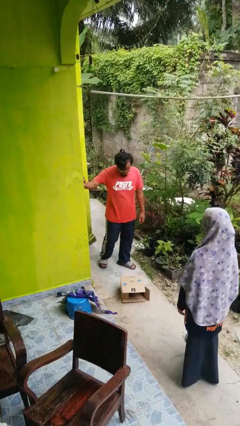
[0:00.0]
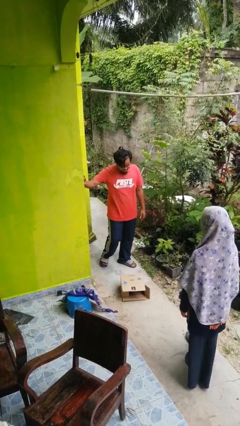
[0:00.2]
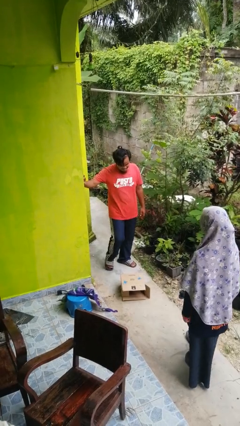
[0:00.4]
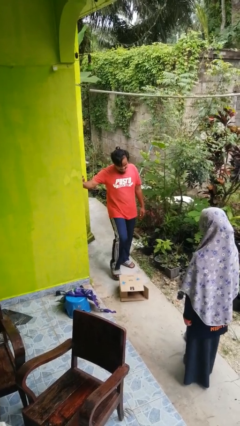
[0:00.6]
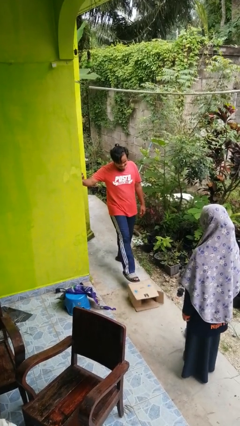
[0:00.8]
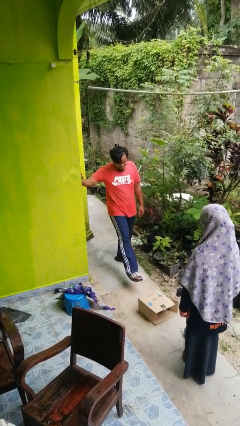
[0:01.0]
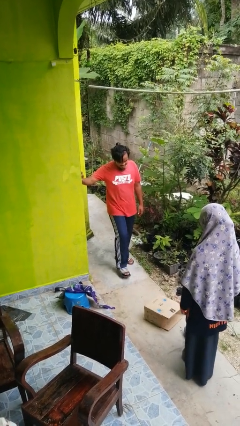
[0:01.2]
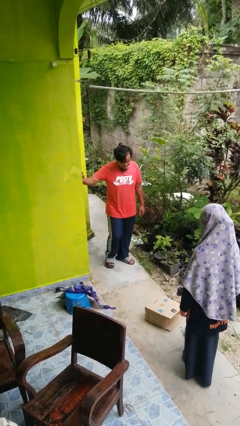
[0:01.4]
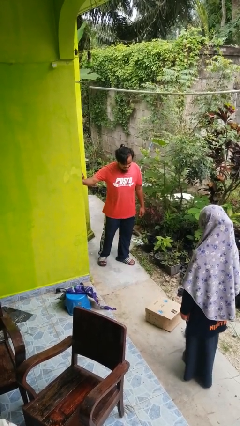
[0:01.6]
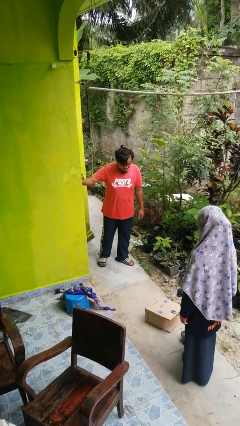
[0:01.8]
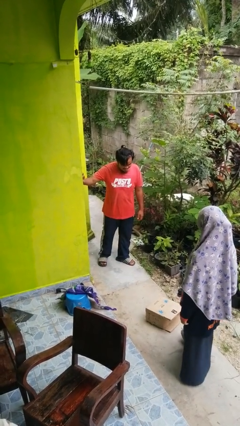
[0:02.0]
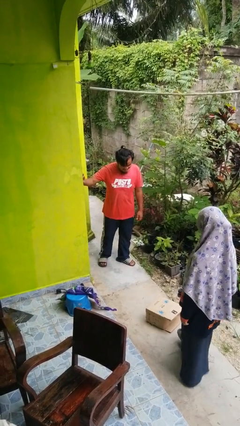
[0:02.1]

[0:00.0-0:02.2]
person kicks object to person

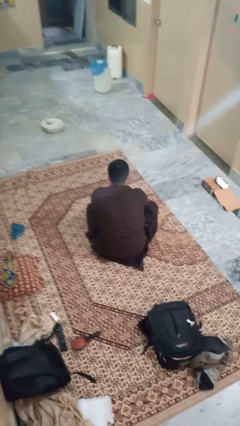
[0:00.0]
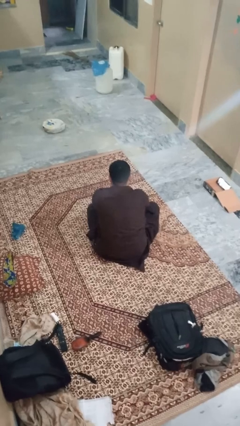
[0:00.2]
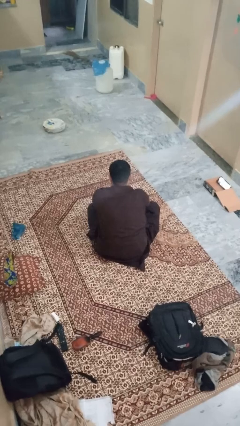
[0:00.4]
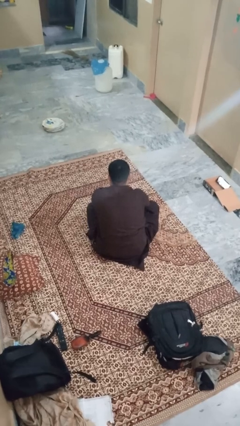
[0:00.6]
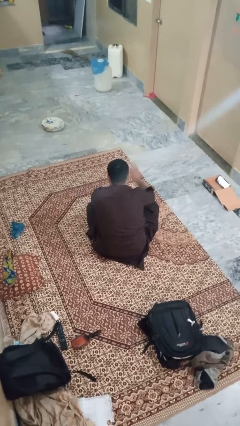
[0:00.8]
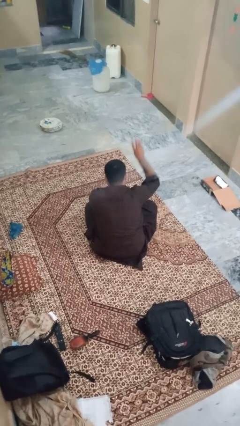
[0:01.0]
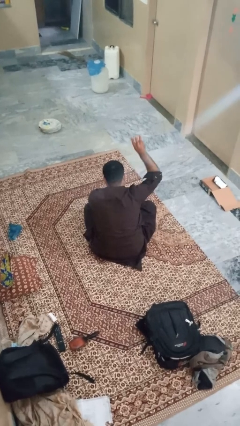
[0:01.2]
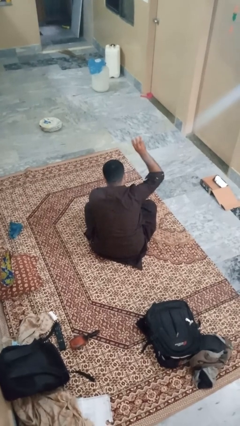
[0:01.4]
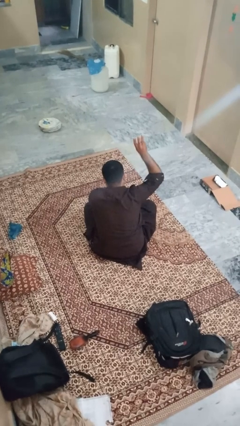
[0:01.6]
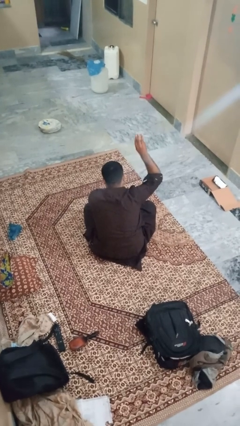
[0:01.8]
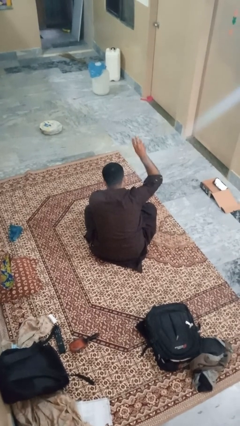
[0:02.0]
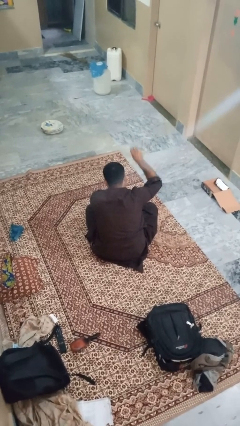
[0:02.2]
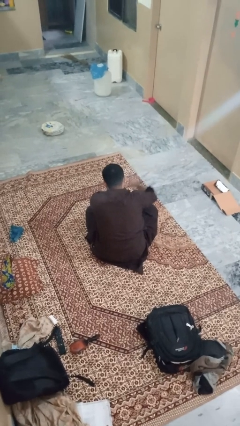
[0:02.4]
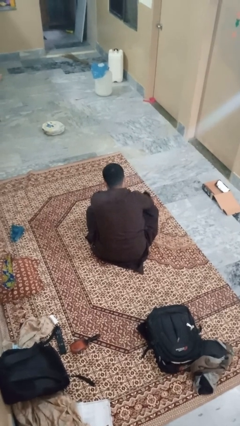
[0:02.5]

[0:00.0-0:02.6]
person gestures number three

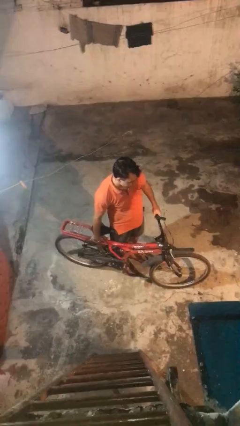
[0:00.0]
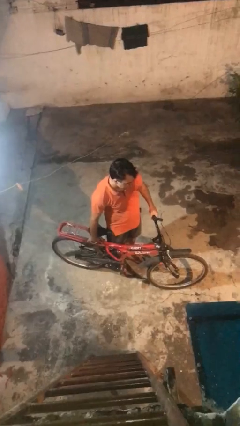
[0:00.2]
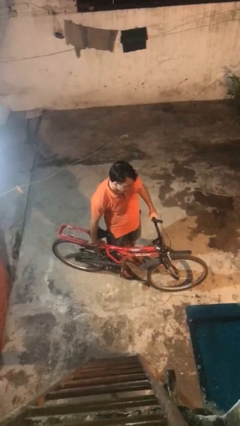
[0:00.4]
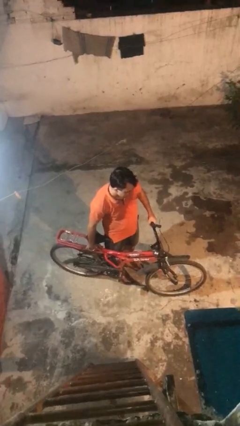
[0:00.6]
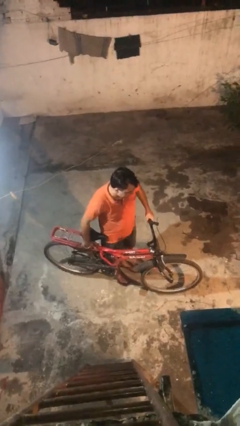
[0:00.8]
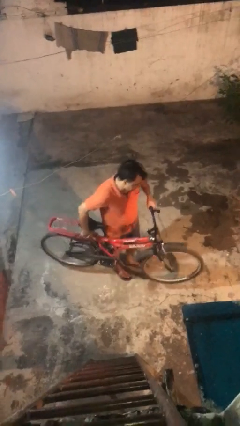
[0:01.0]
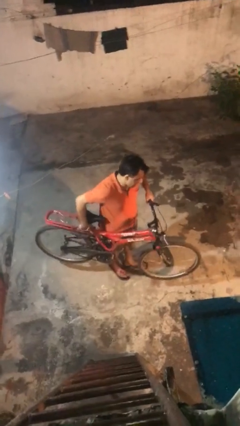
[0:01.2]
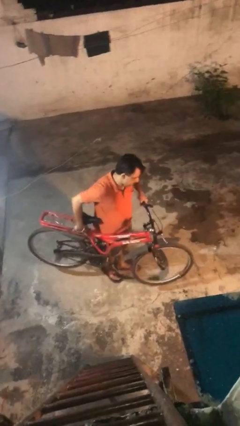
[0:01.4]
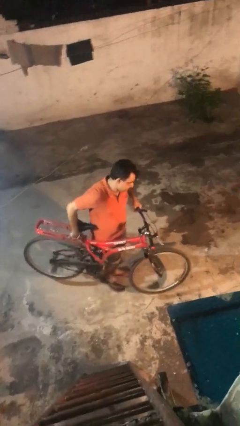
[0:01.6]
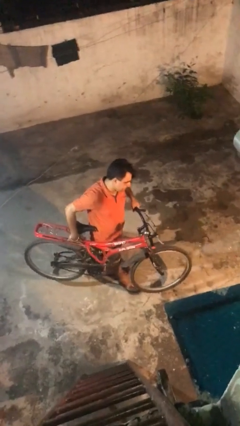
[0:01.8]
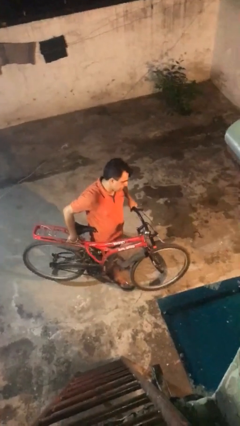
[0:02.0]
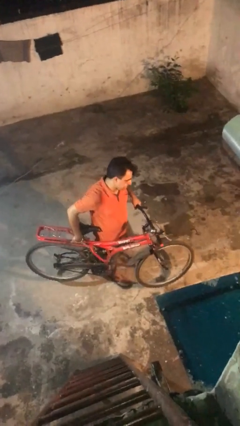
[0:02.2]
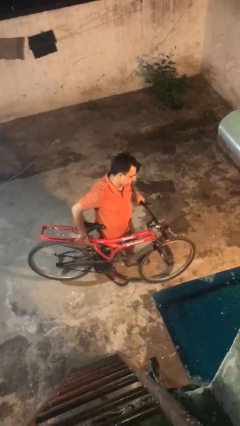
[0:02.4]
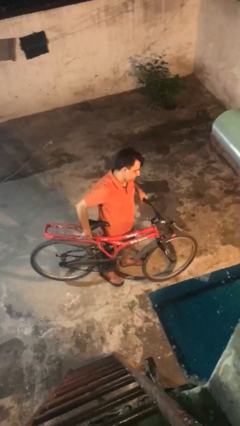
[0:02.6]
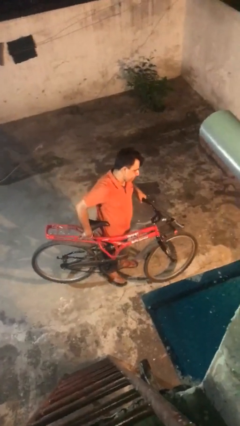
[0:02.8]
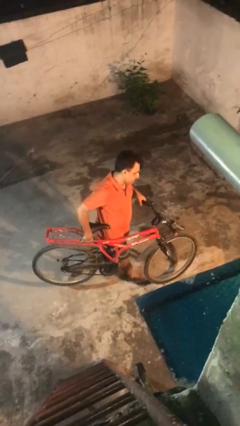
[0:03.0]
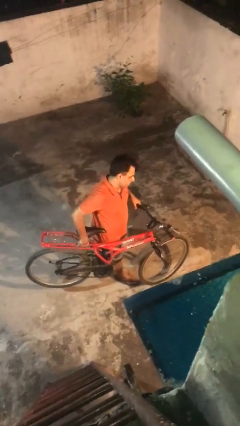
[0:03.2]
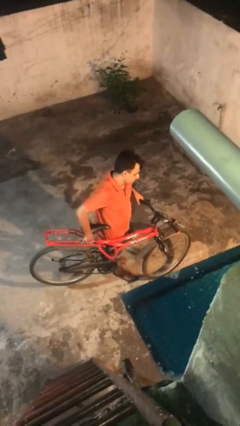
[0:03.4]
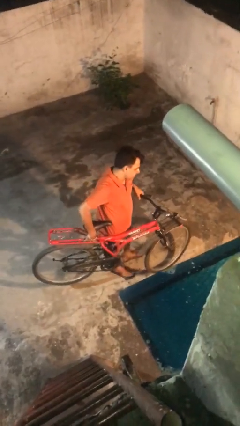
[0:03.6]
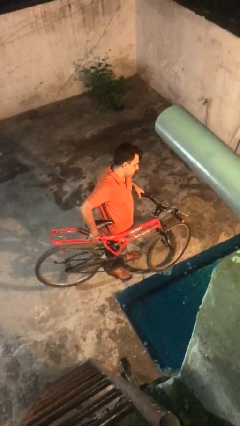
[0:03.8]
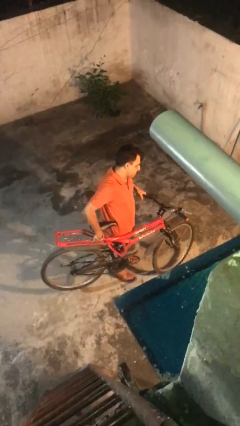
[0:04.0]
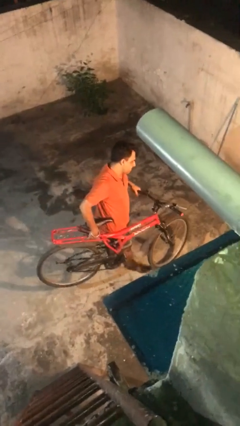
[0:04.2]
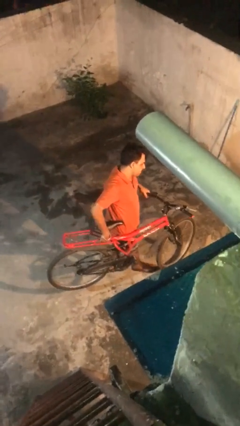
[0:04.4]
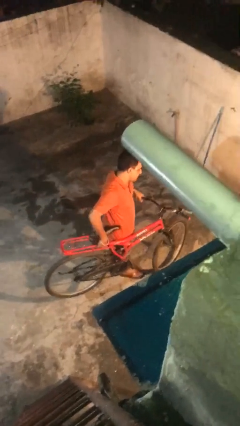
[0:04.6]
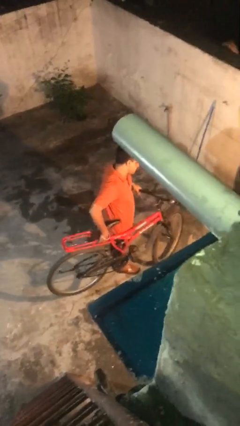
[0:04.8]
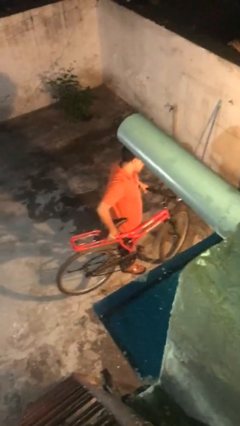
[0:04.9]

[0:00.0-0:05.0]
person carries bicycle

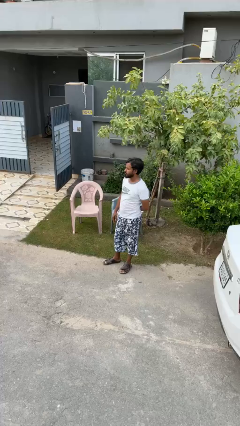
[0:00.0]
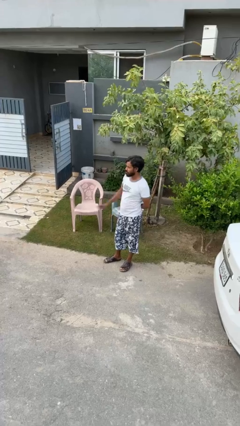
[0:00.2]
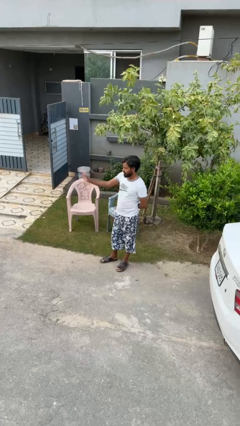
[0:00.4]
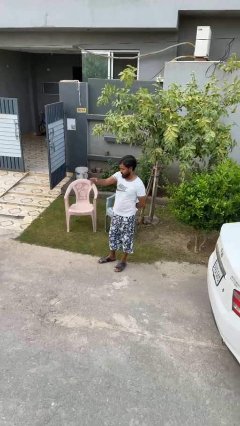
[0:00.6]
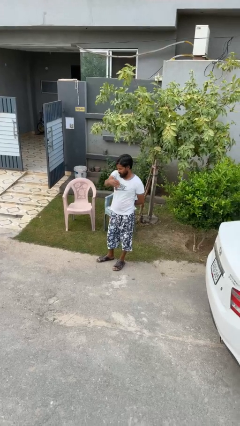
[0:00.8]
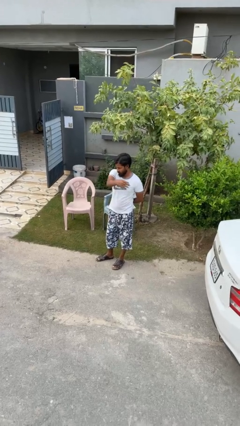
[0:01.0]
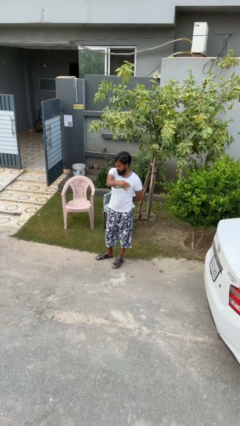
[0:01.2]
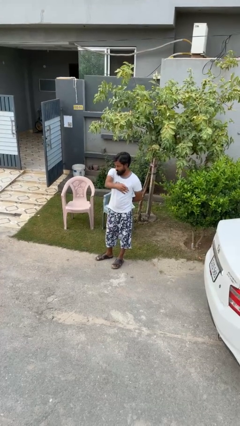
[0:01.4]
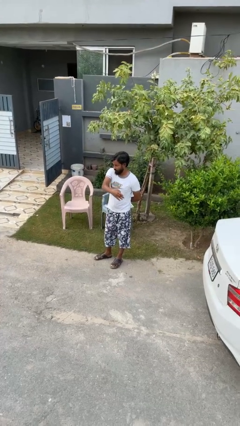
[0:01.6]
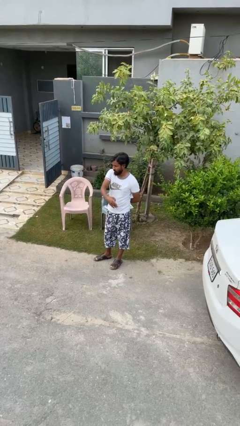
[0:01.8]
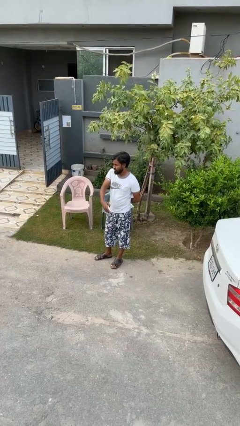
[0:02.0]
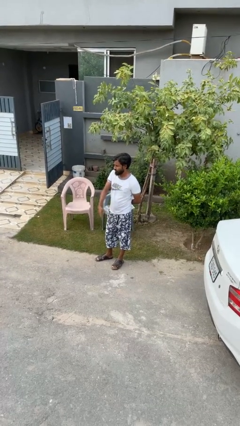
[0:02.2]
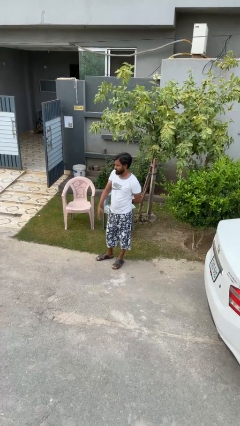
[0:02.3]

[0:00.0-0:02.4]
person gestures swipe left

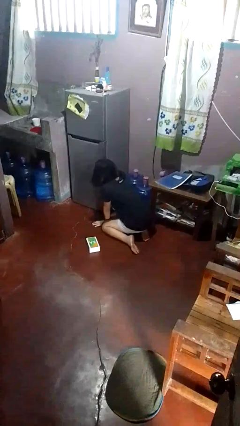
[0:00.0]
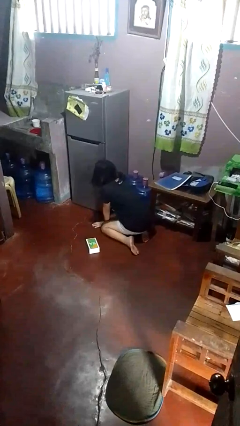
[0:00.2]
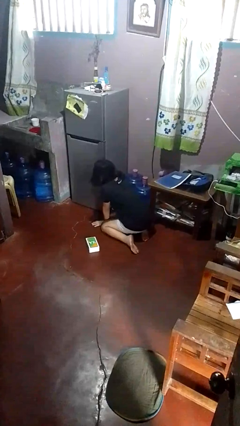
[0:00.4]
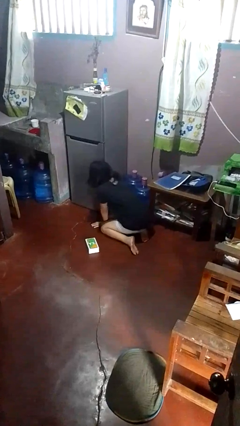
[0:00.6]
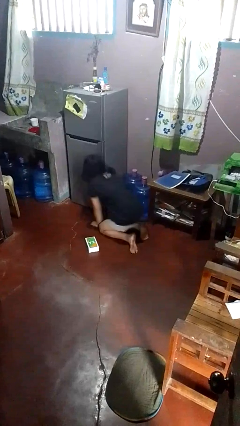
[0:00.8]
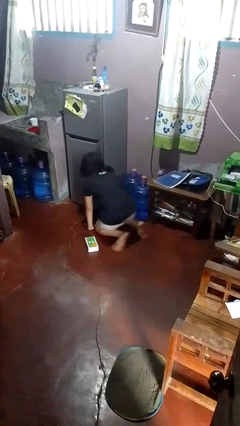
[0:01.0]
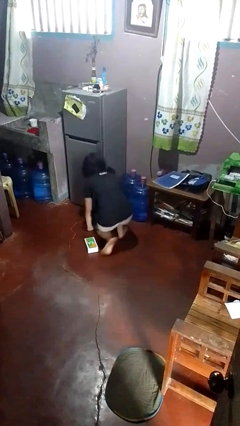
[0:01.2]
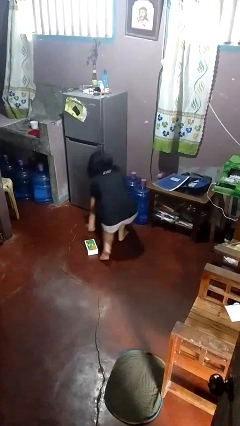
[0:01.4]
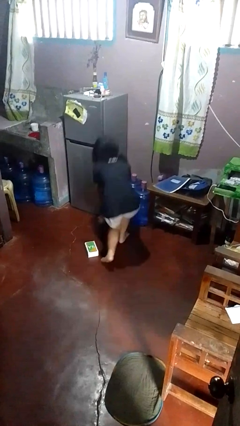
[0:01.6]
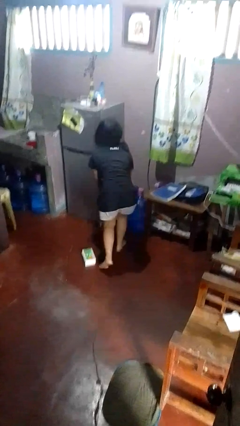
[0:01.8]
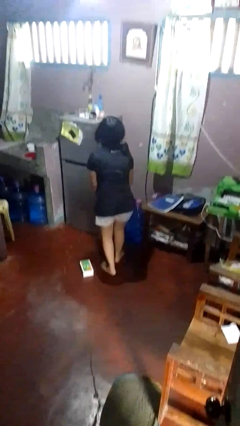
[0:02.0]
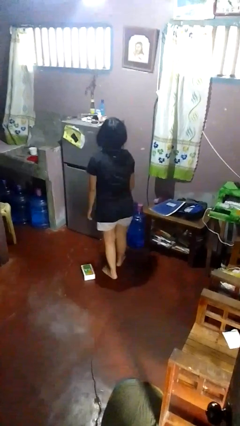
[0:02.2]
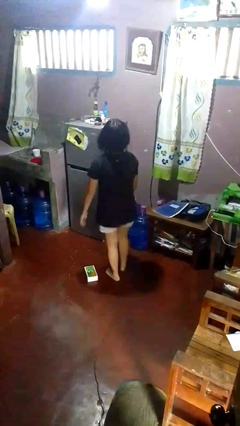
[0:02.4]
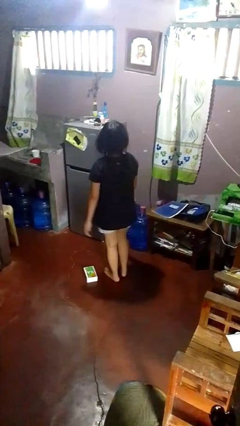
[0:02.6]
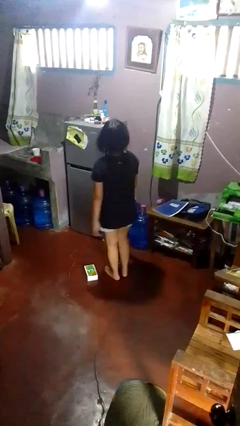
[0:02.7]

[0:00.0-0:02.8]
person stands up from floor

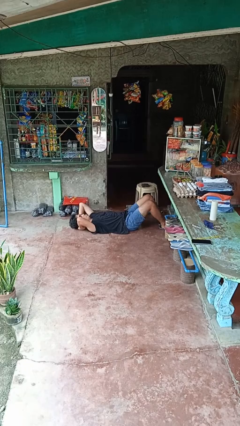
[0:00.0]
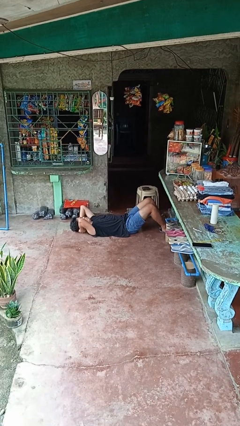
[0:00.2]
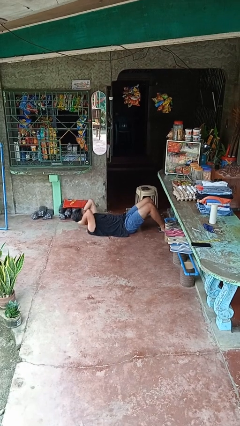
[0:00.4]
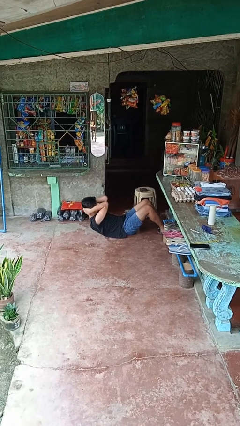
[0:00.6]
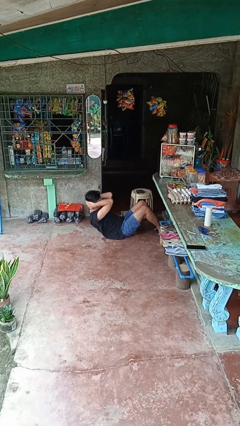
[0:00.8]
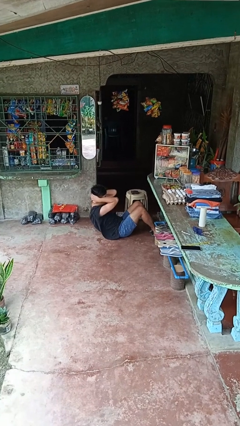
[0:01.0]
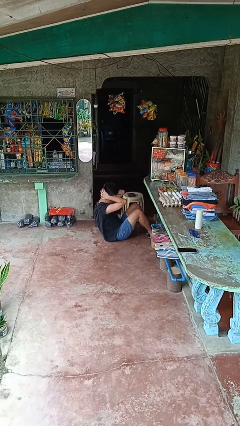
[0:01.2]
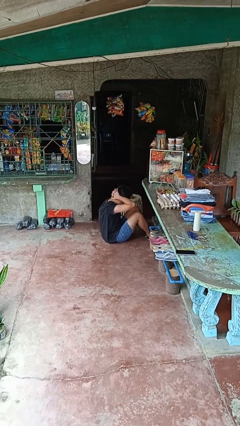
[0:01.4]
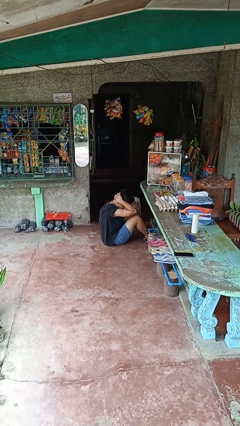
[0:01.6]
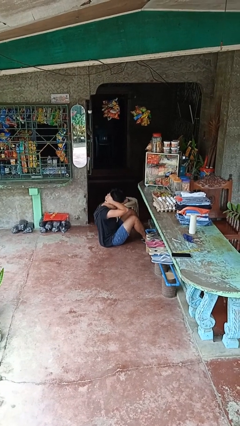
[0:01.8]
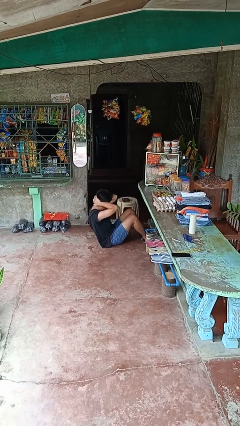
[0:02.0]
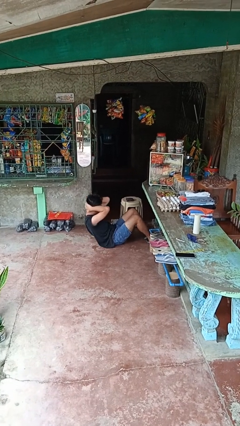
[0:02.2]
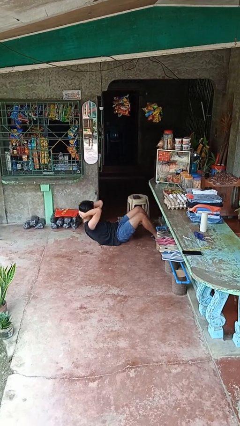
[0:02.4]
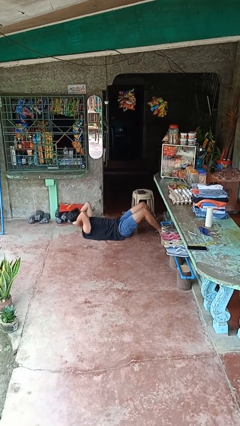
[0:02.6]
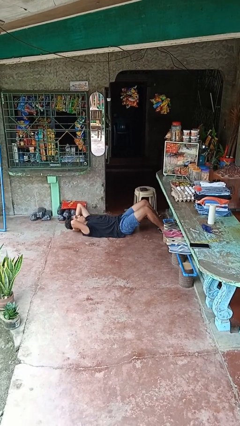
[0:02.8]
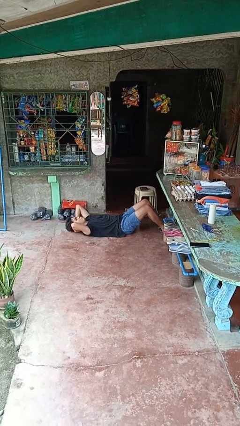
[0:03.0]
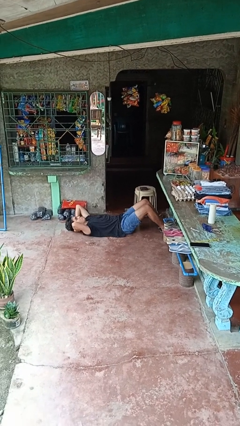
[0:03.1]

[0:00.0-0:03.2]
person exercises with situp
